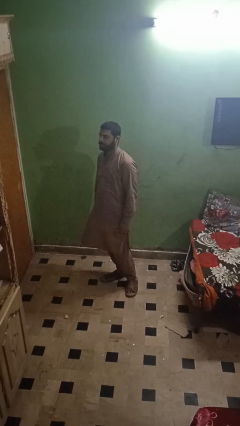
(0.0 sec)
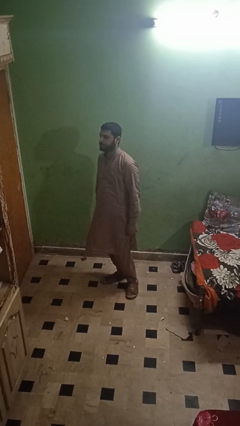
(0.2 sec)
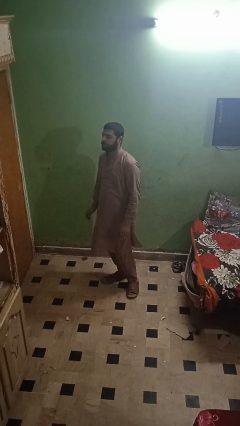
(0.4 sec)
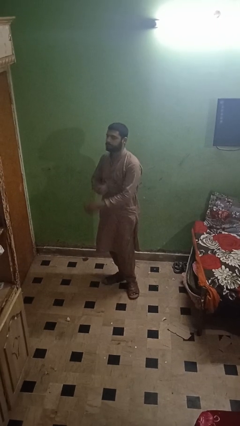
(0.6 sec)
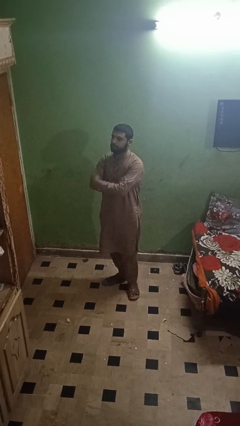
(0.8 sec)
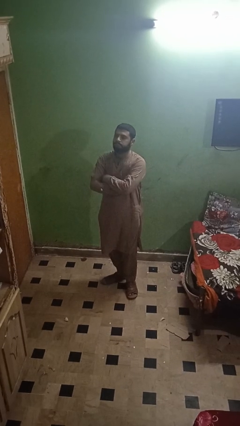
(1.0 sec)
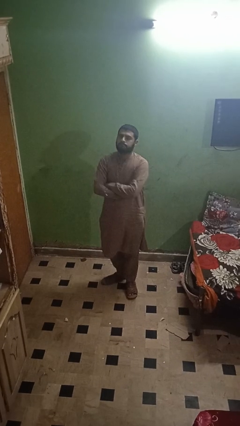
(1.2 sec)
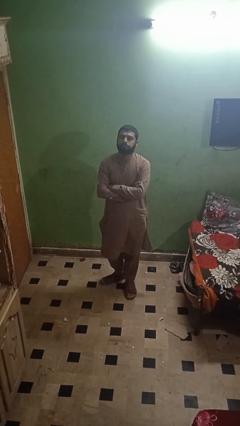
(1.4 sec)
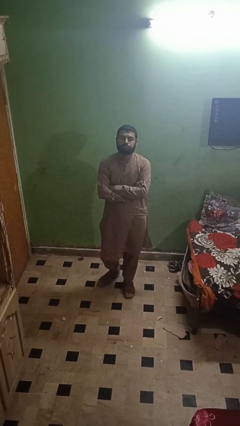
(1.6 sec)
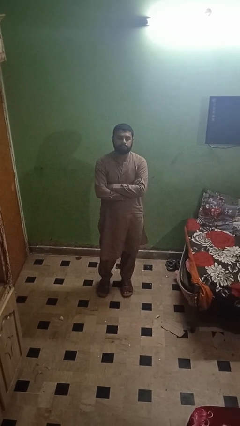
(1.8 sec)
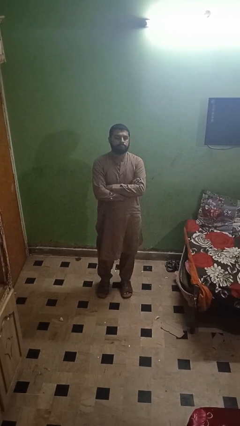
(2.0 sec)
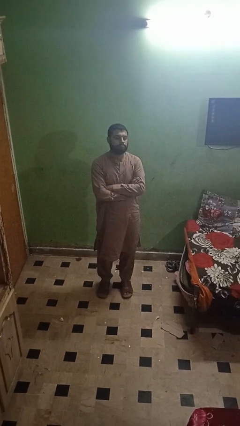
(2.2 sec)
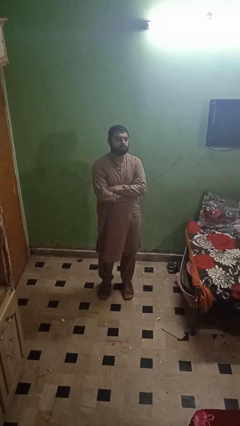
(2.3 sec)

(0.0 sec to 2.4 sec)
person crosses arms

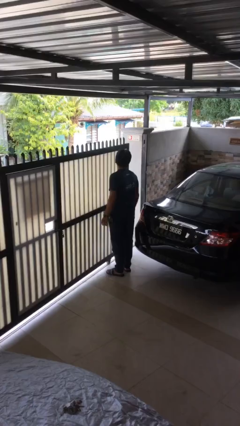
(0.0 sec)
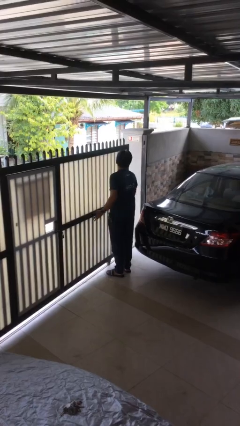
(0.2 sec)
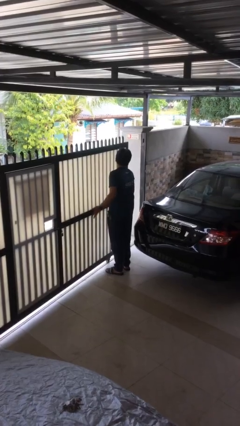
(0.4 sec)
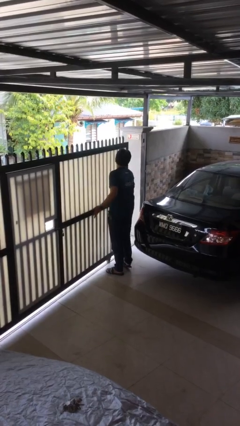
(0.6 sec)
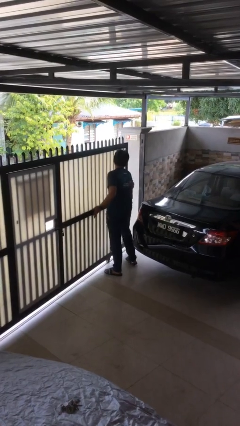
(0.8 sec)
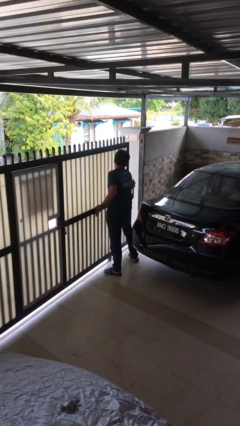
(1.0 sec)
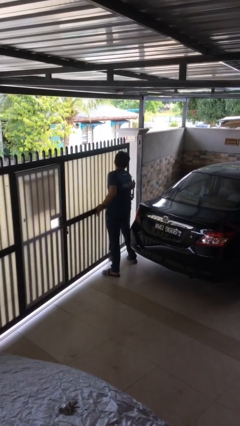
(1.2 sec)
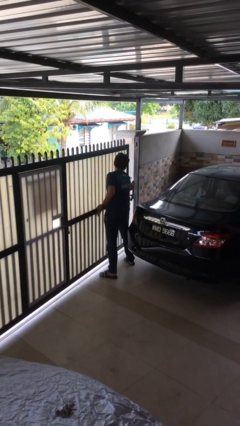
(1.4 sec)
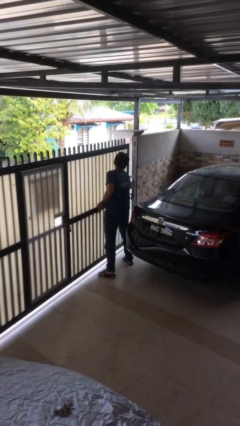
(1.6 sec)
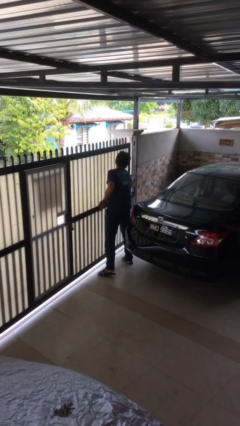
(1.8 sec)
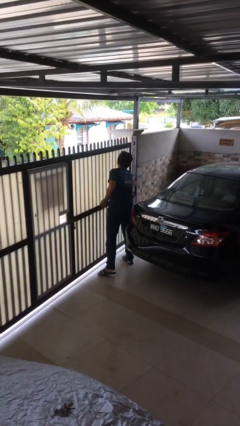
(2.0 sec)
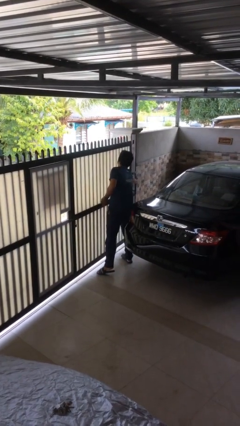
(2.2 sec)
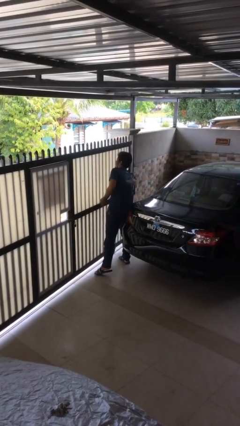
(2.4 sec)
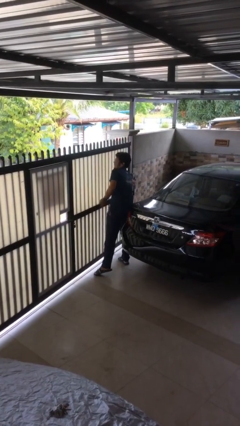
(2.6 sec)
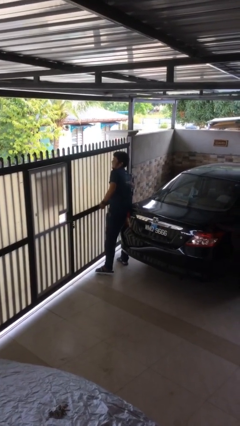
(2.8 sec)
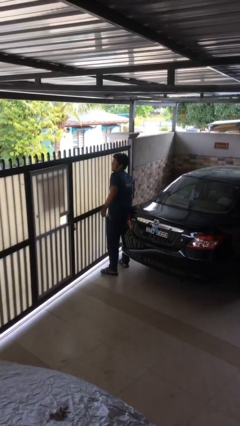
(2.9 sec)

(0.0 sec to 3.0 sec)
person closes sliding door

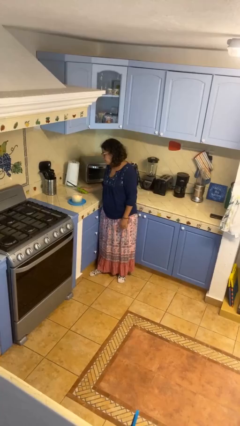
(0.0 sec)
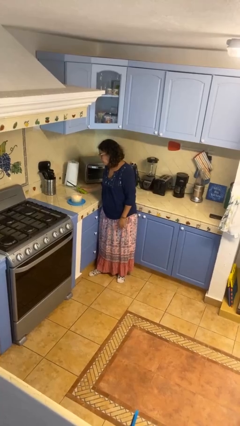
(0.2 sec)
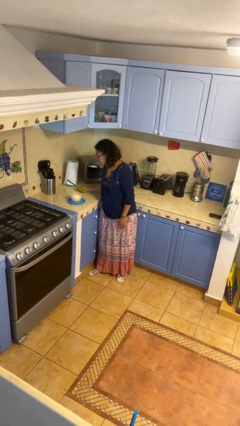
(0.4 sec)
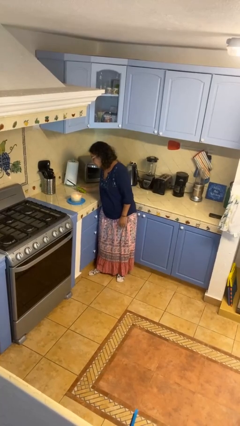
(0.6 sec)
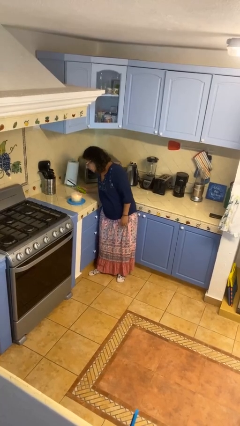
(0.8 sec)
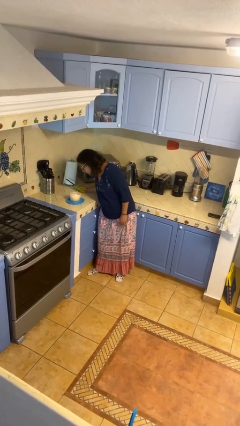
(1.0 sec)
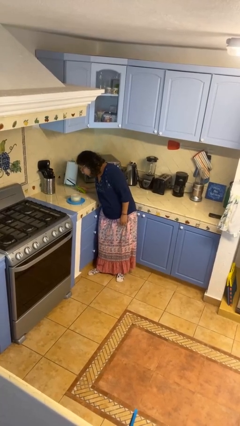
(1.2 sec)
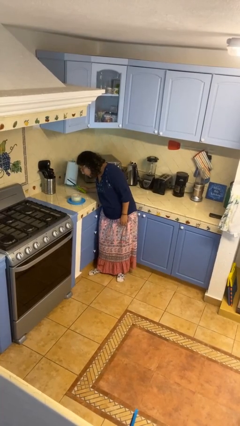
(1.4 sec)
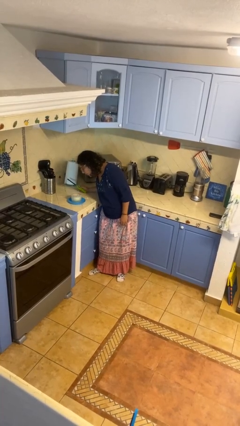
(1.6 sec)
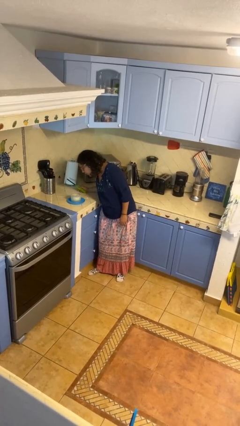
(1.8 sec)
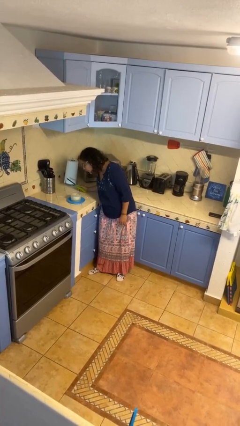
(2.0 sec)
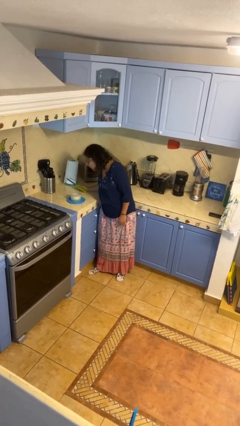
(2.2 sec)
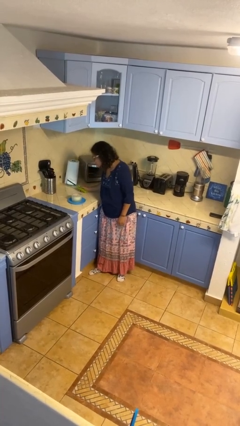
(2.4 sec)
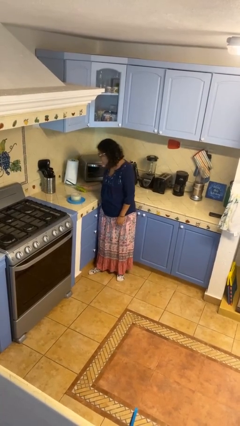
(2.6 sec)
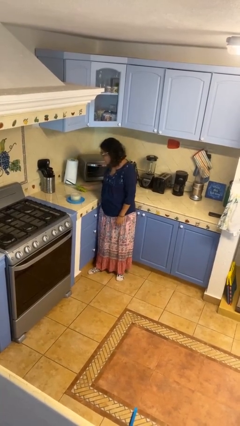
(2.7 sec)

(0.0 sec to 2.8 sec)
person extinguishes candle

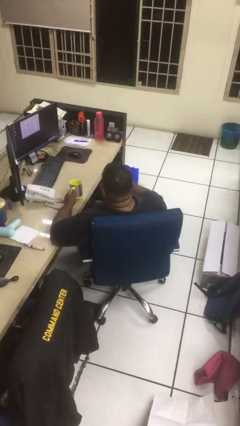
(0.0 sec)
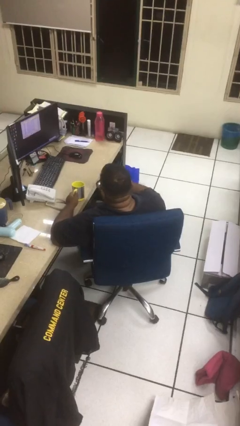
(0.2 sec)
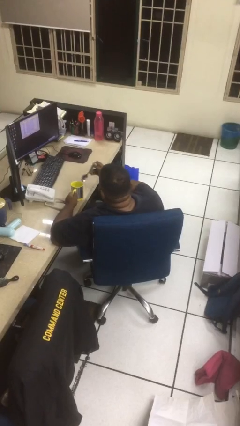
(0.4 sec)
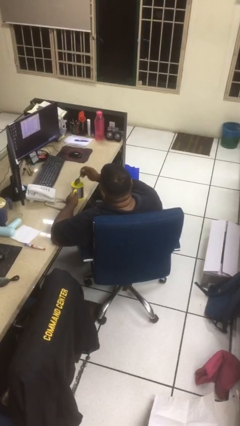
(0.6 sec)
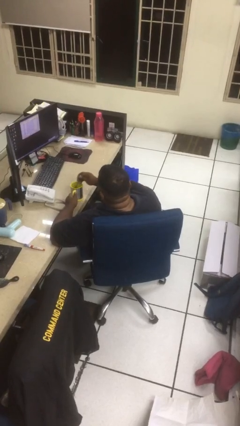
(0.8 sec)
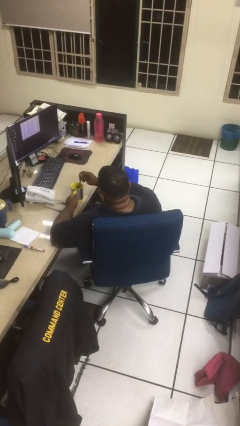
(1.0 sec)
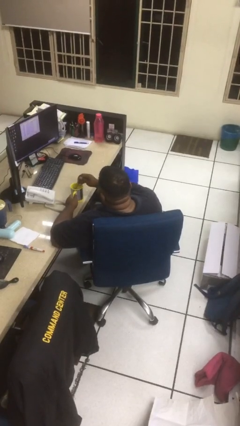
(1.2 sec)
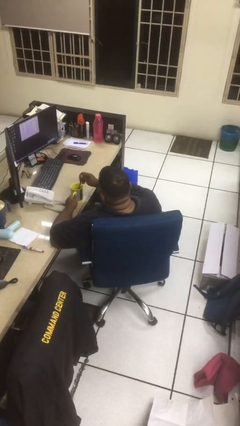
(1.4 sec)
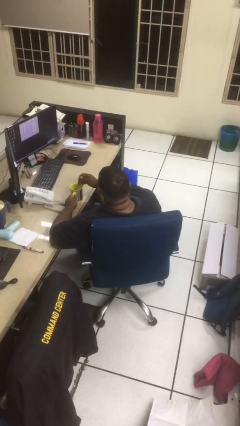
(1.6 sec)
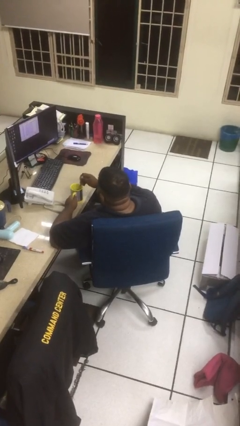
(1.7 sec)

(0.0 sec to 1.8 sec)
person stirs mug

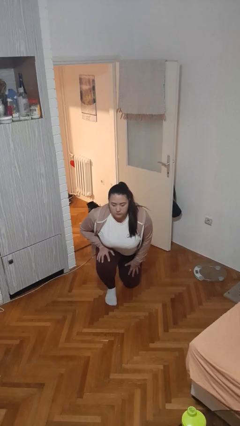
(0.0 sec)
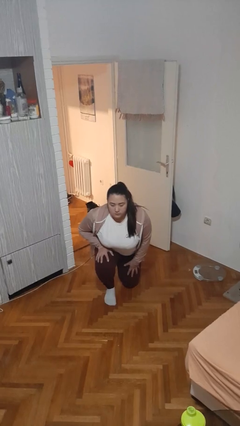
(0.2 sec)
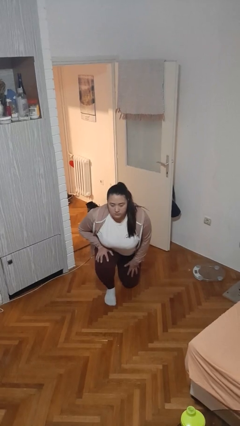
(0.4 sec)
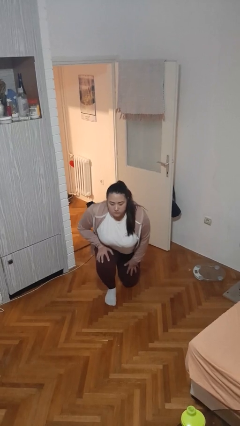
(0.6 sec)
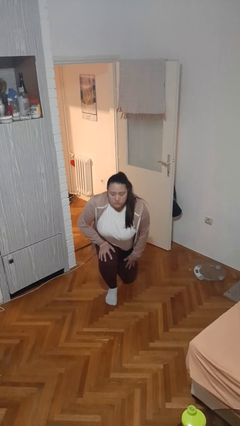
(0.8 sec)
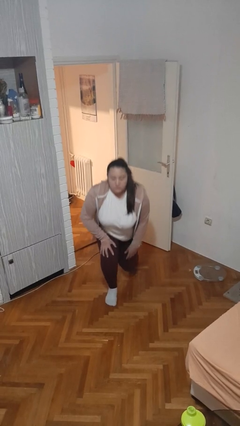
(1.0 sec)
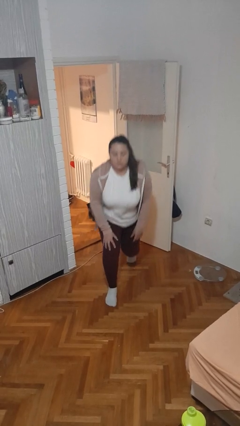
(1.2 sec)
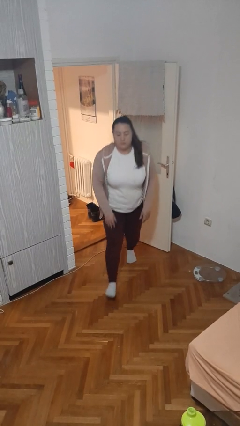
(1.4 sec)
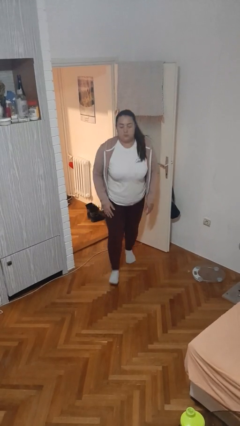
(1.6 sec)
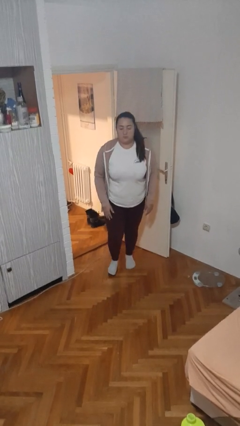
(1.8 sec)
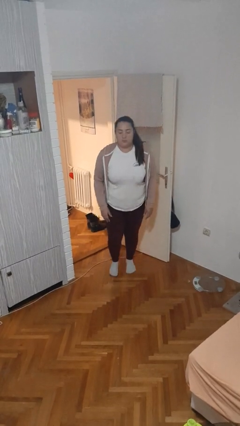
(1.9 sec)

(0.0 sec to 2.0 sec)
person stands up from floor

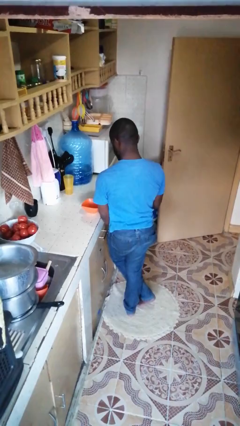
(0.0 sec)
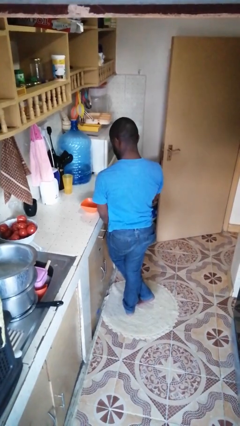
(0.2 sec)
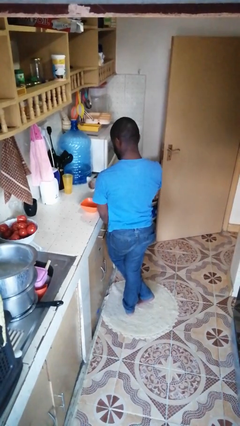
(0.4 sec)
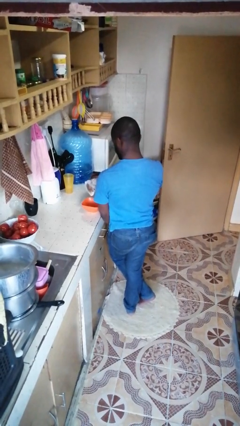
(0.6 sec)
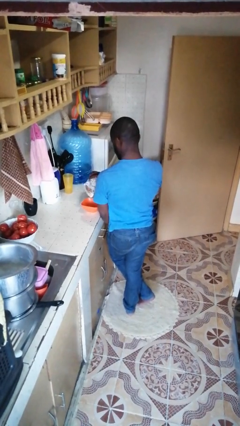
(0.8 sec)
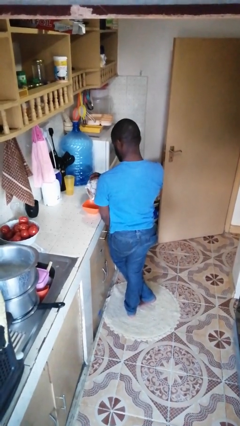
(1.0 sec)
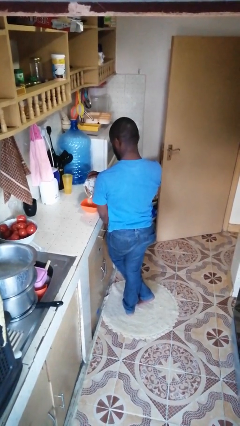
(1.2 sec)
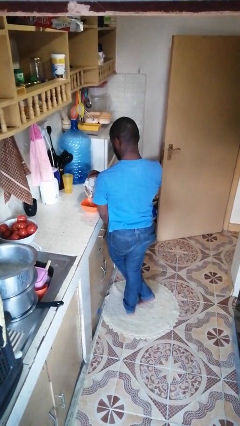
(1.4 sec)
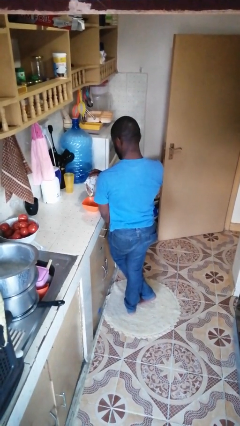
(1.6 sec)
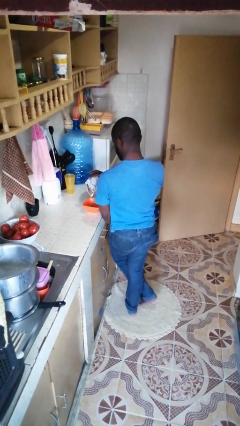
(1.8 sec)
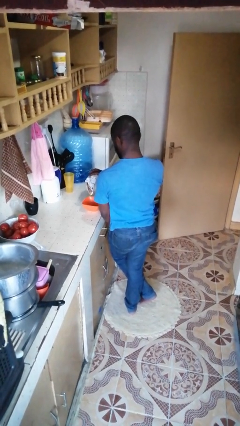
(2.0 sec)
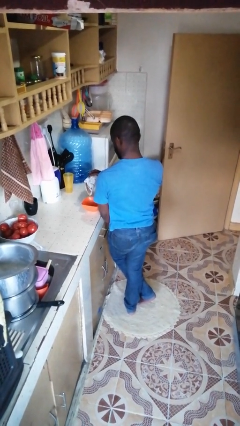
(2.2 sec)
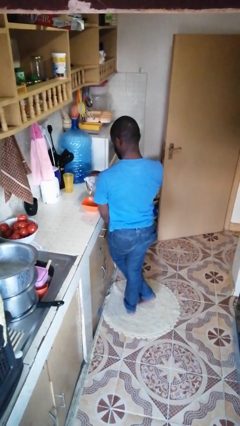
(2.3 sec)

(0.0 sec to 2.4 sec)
person pours into bowl

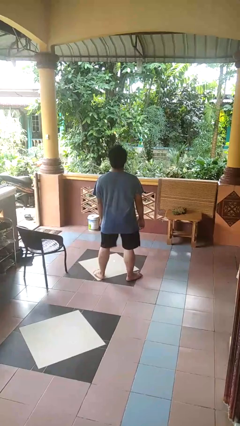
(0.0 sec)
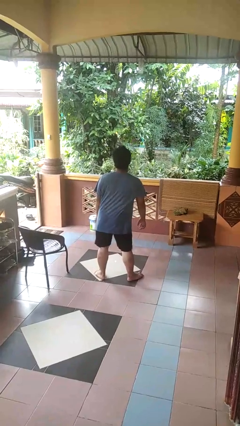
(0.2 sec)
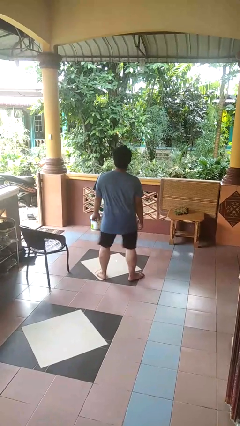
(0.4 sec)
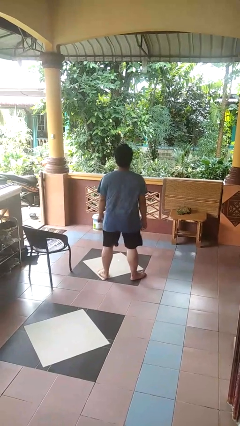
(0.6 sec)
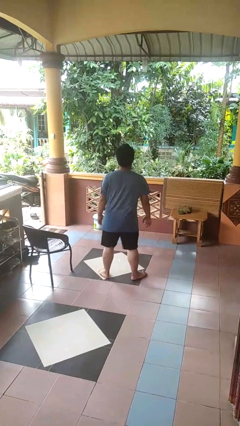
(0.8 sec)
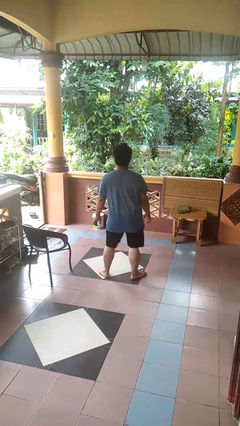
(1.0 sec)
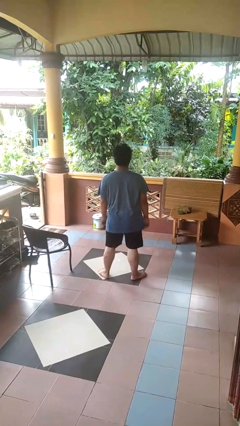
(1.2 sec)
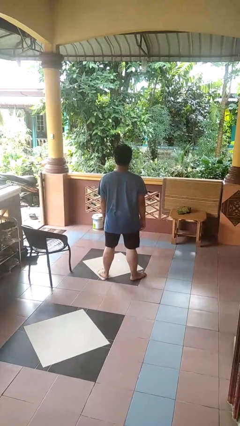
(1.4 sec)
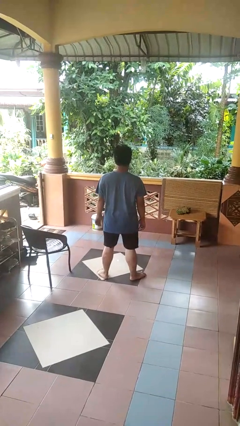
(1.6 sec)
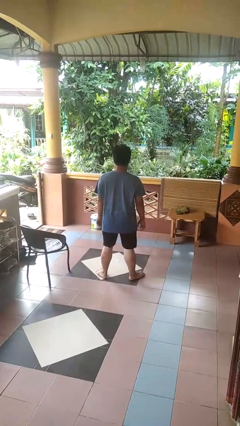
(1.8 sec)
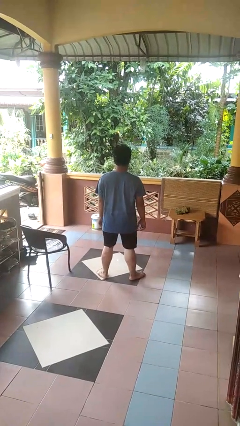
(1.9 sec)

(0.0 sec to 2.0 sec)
person wiggles hips
